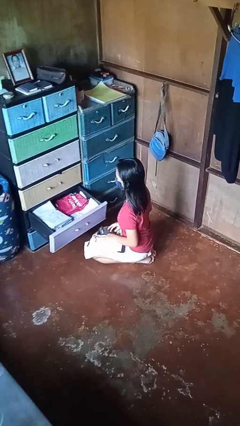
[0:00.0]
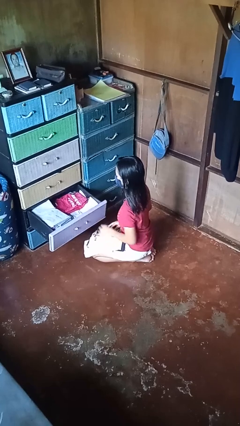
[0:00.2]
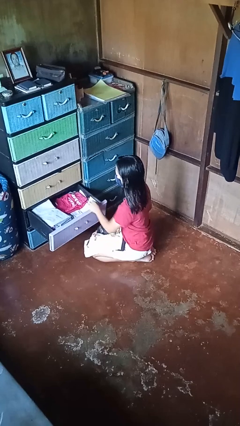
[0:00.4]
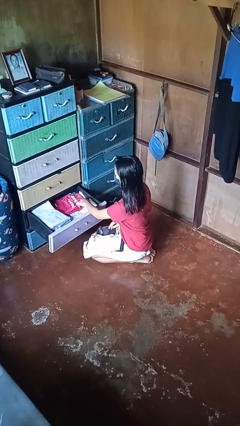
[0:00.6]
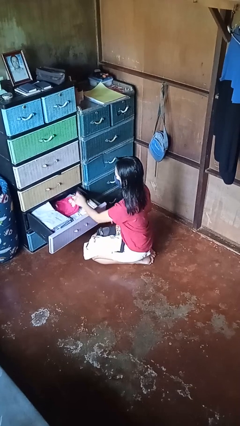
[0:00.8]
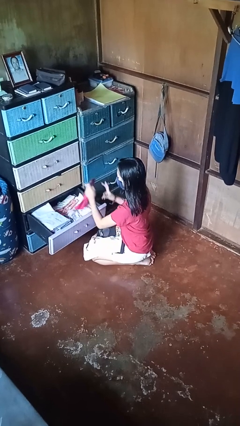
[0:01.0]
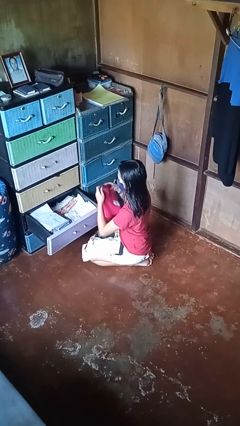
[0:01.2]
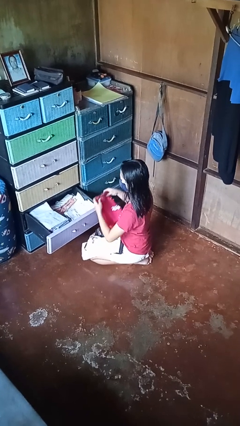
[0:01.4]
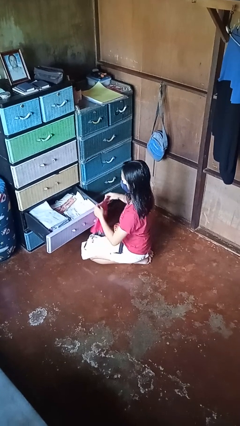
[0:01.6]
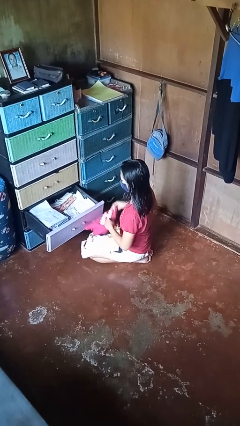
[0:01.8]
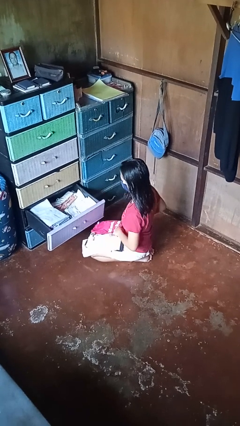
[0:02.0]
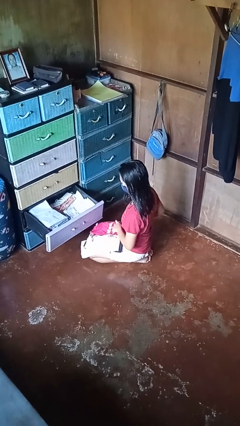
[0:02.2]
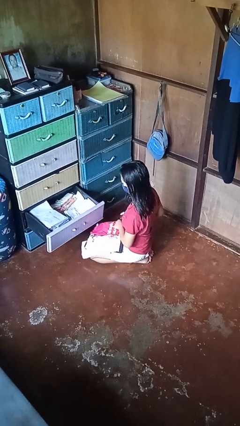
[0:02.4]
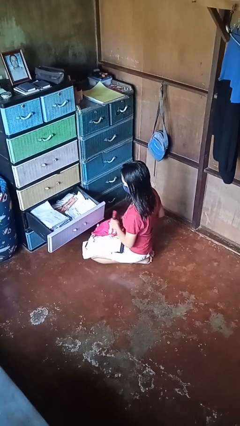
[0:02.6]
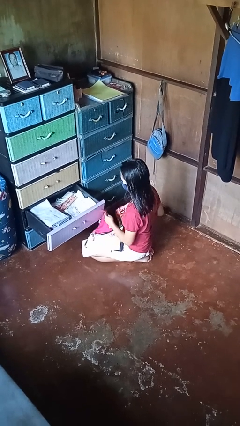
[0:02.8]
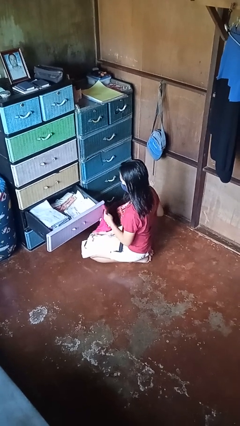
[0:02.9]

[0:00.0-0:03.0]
person takes clothes from dresser

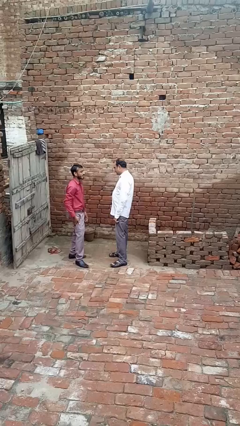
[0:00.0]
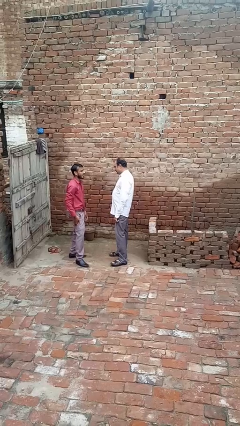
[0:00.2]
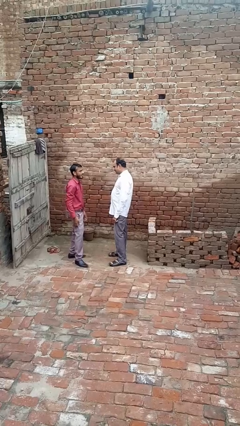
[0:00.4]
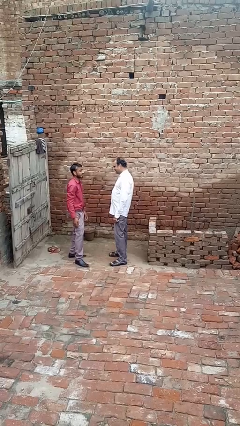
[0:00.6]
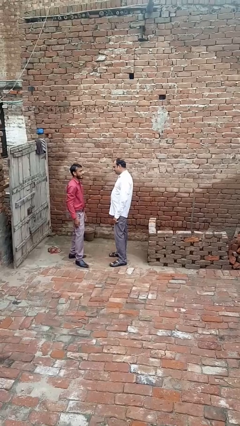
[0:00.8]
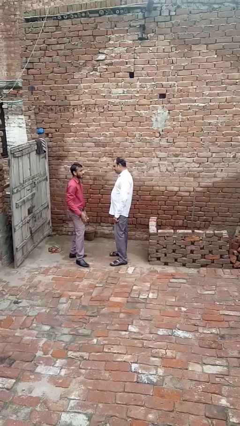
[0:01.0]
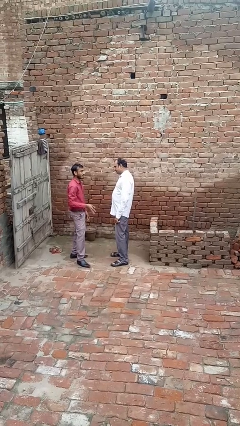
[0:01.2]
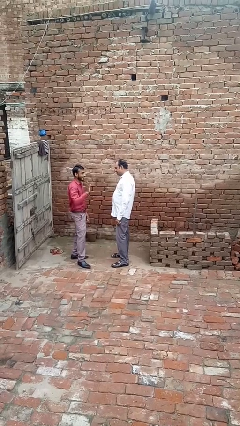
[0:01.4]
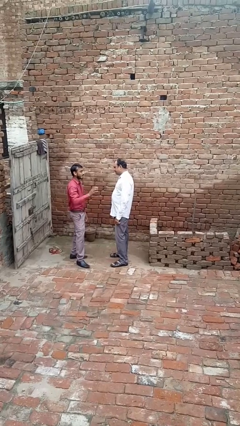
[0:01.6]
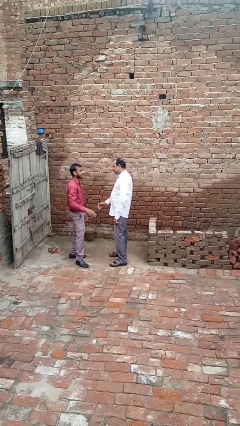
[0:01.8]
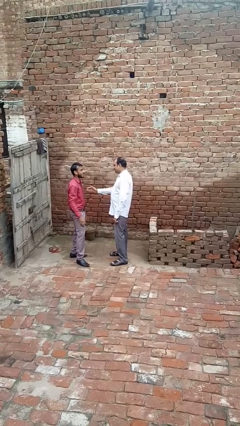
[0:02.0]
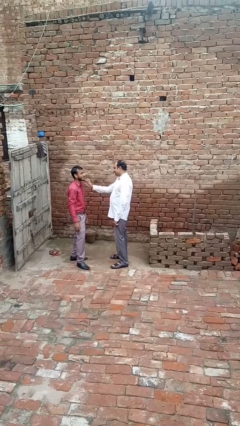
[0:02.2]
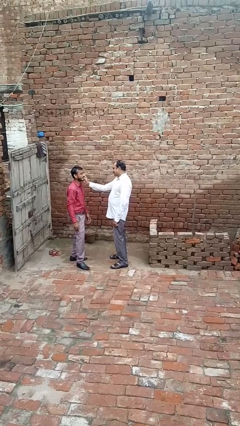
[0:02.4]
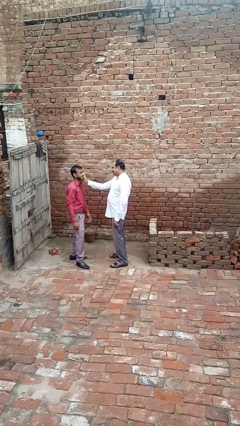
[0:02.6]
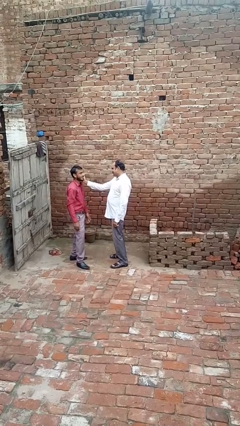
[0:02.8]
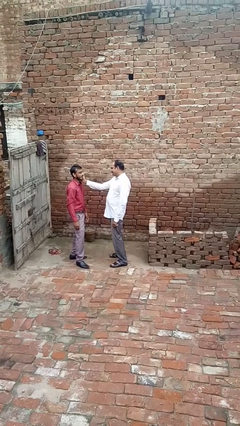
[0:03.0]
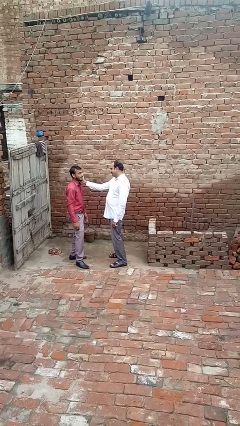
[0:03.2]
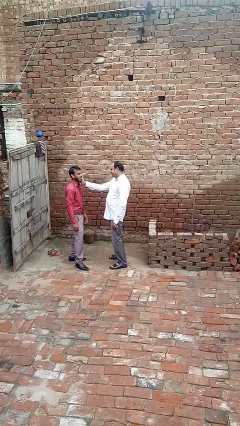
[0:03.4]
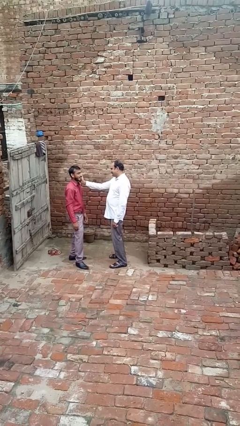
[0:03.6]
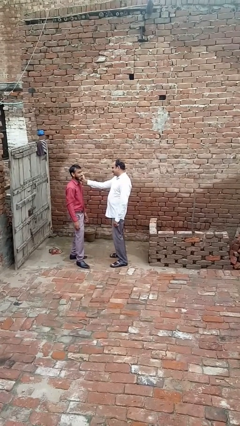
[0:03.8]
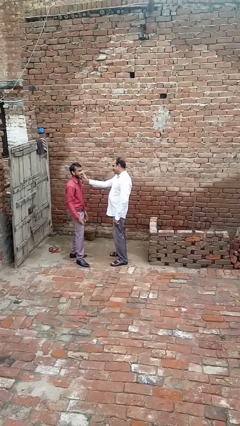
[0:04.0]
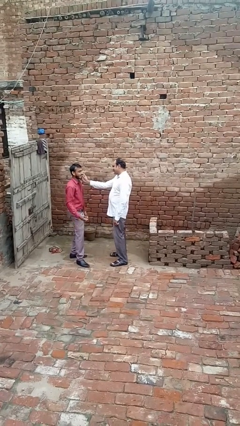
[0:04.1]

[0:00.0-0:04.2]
person touches face of person

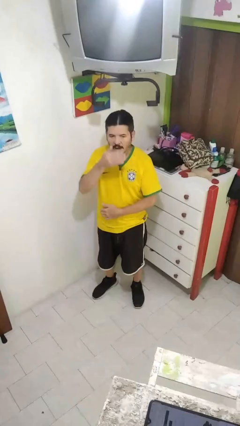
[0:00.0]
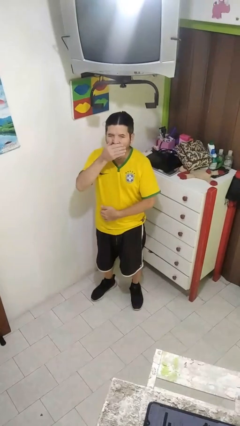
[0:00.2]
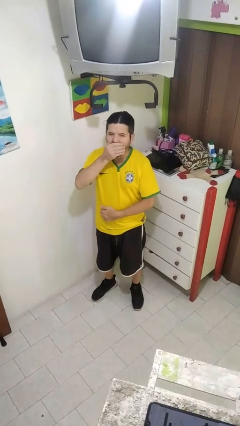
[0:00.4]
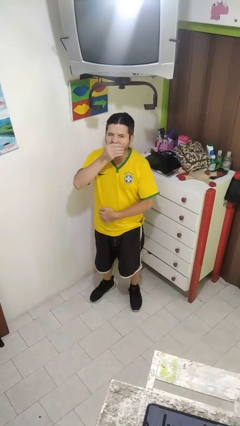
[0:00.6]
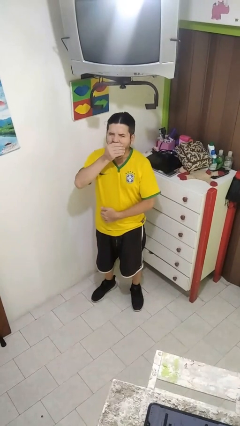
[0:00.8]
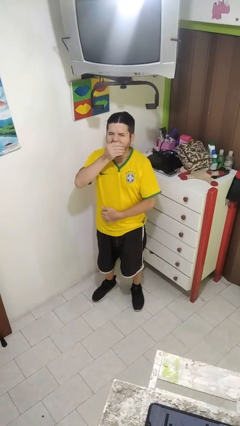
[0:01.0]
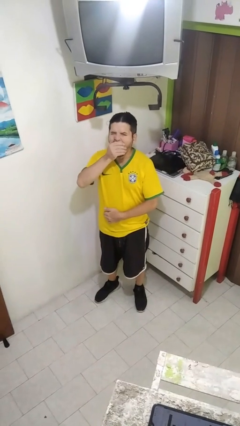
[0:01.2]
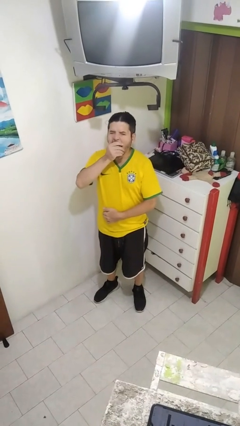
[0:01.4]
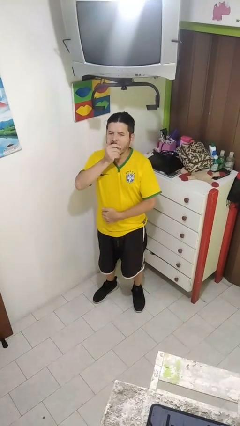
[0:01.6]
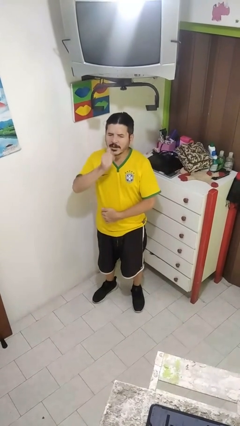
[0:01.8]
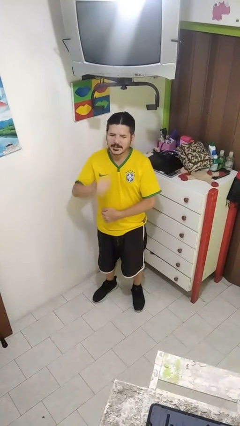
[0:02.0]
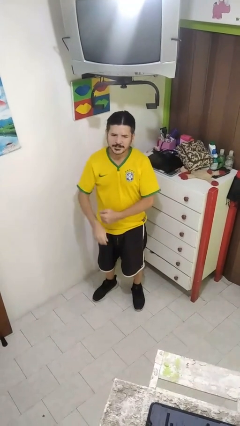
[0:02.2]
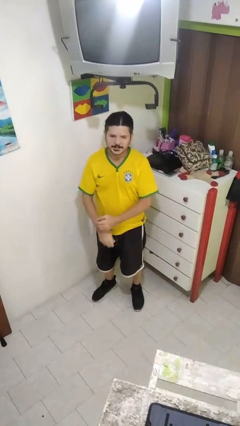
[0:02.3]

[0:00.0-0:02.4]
person yawns

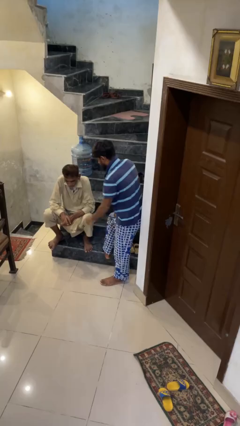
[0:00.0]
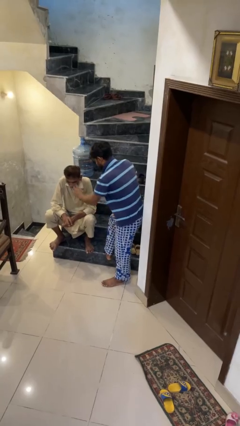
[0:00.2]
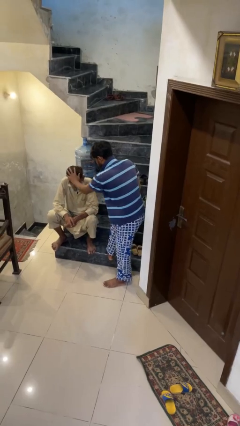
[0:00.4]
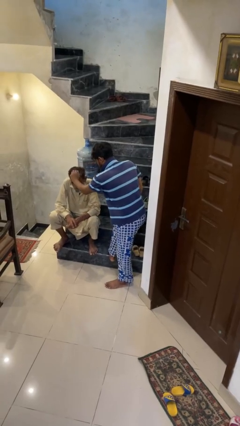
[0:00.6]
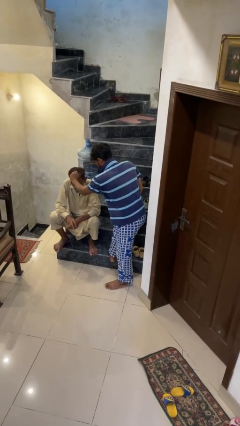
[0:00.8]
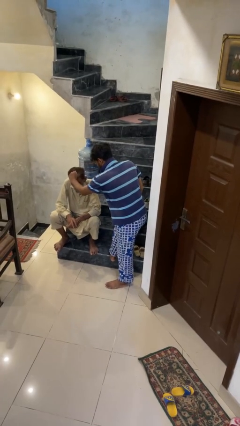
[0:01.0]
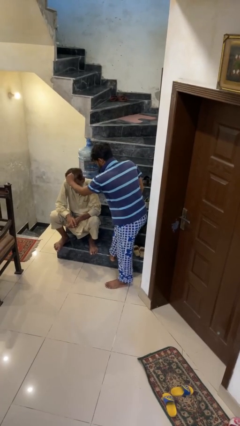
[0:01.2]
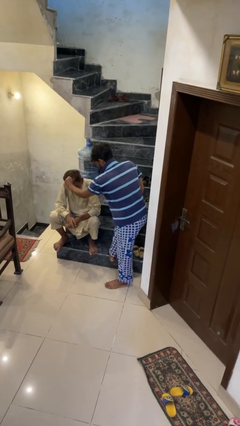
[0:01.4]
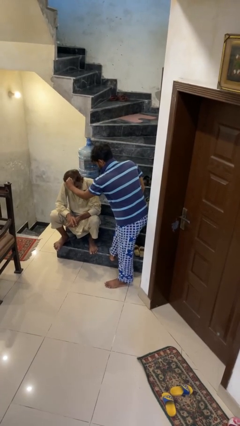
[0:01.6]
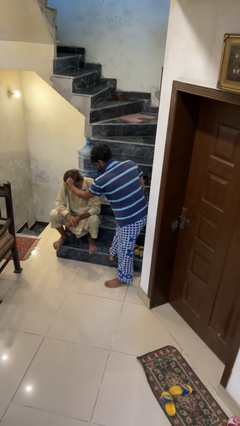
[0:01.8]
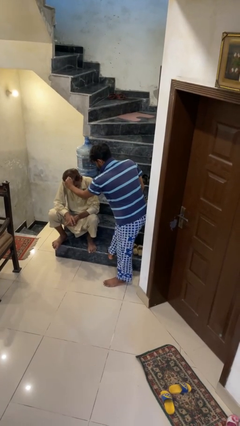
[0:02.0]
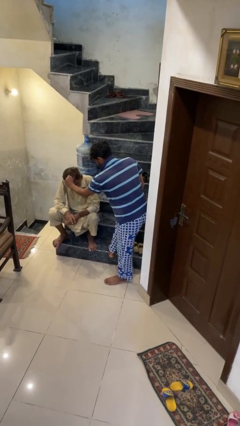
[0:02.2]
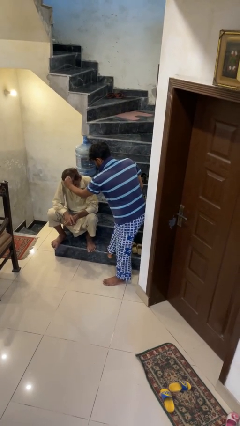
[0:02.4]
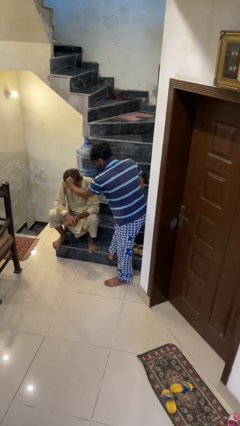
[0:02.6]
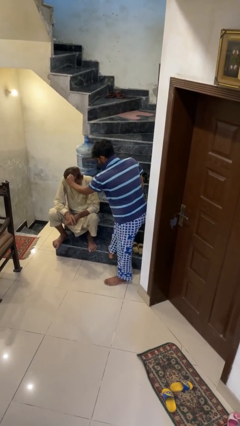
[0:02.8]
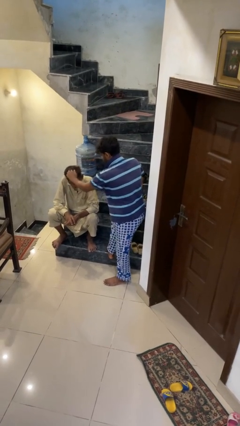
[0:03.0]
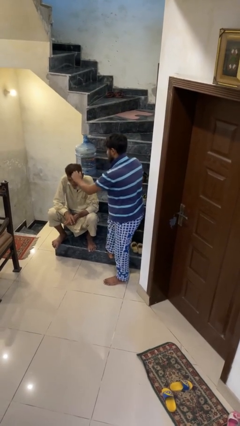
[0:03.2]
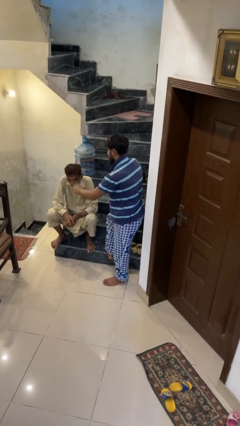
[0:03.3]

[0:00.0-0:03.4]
person grabs person by hair

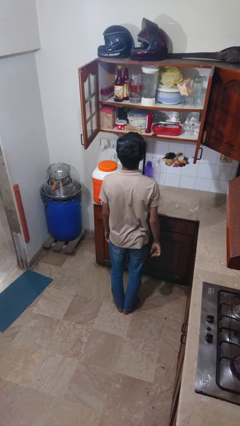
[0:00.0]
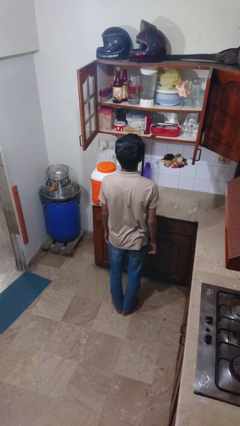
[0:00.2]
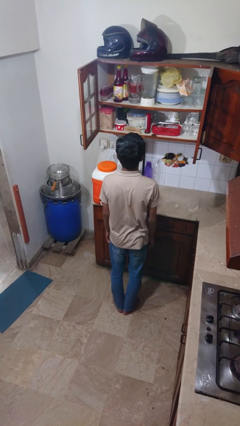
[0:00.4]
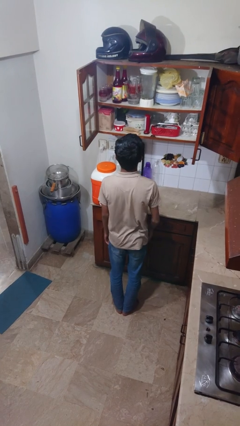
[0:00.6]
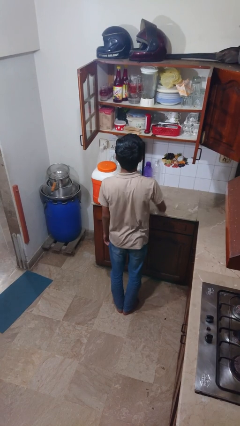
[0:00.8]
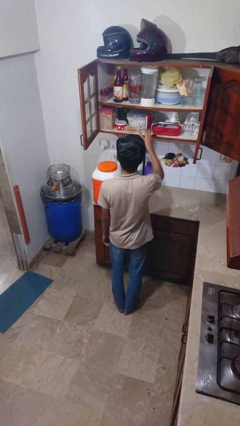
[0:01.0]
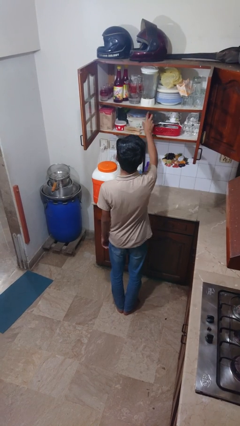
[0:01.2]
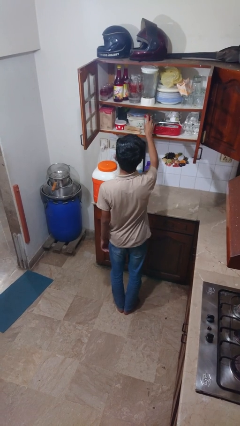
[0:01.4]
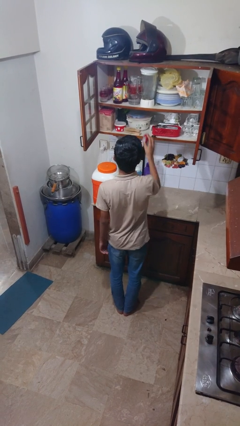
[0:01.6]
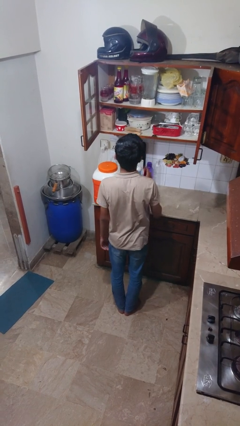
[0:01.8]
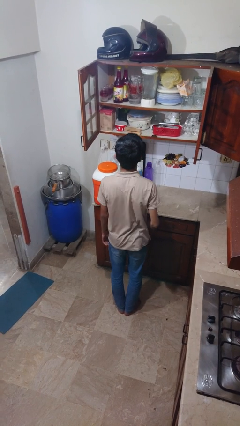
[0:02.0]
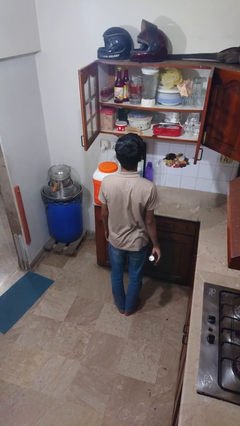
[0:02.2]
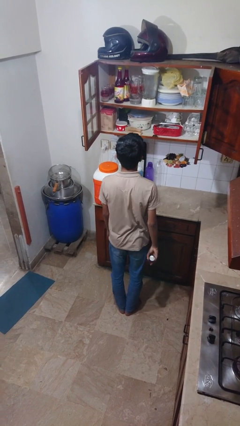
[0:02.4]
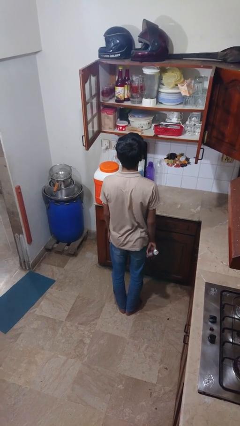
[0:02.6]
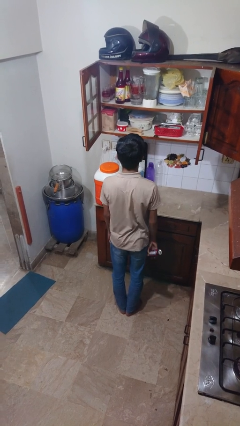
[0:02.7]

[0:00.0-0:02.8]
person picks up object from cabinet

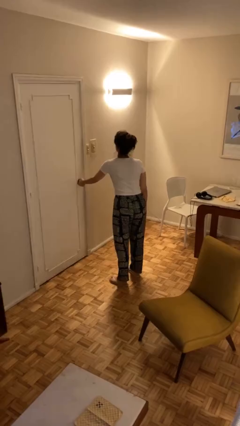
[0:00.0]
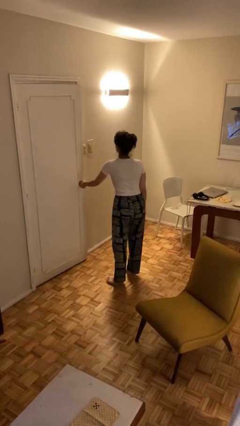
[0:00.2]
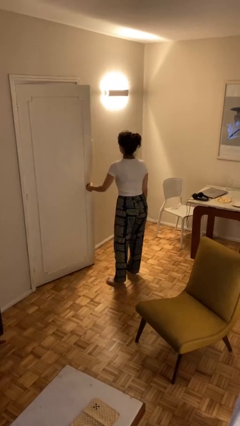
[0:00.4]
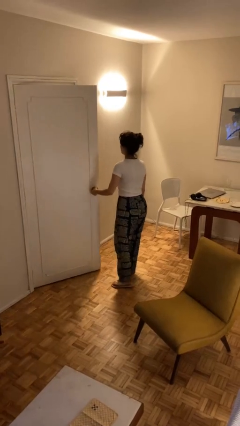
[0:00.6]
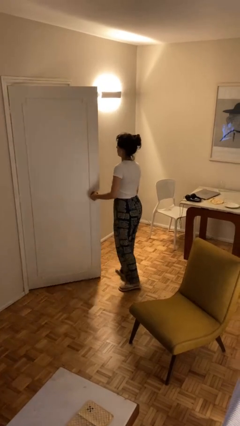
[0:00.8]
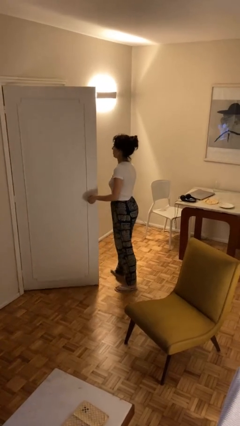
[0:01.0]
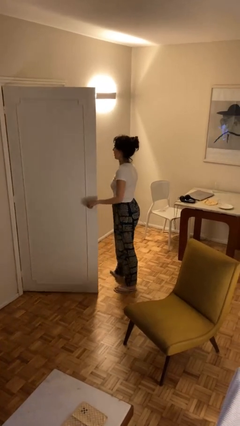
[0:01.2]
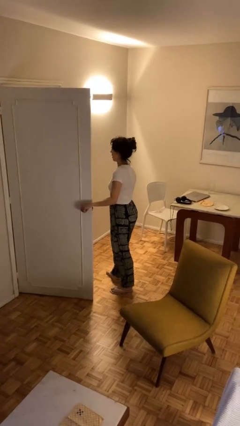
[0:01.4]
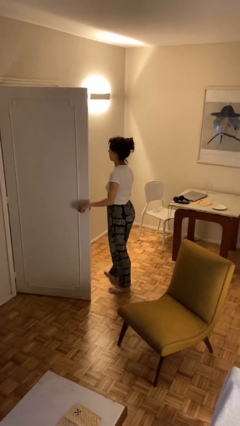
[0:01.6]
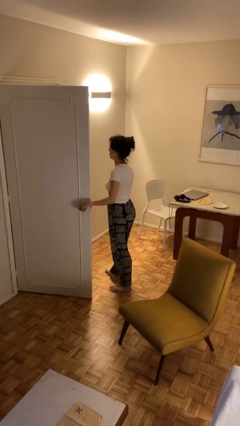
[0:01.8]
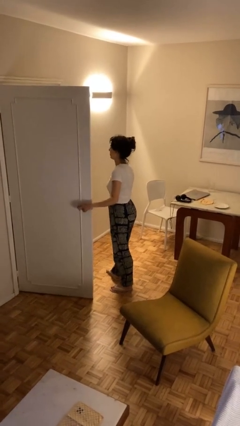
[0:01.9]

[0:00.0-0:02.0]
person opens facility door
